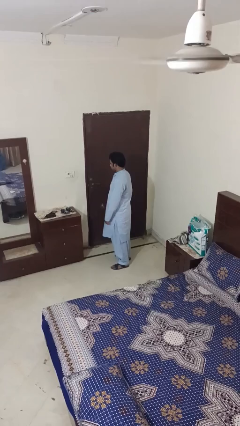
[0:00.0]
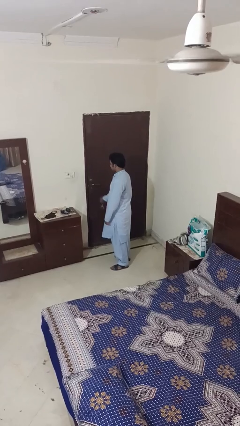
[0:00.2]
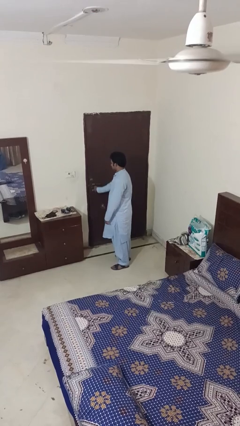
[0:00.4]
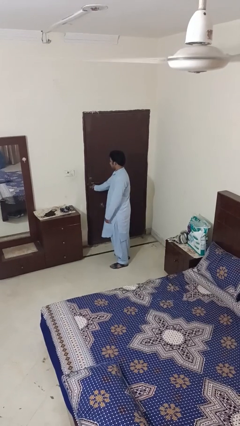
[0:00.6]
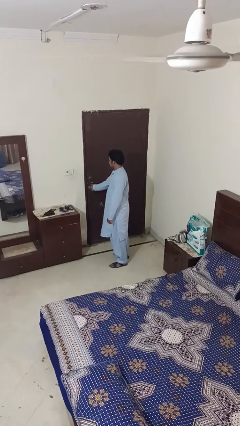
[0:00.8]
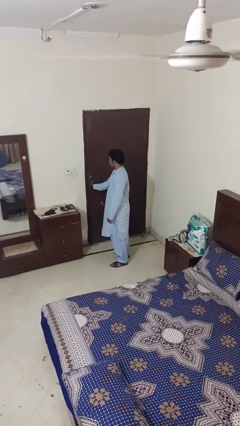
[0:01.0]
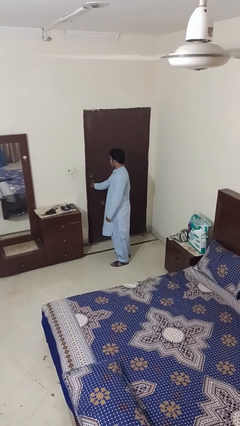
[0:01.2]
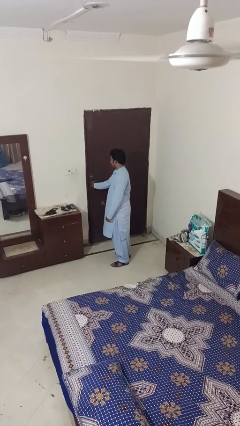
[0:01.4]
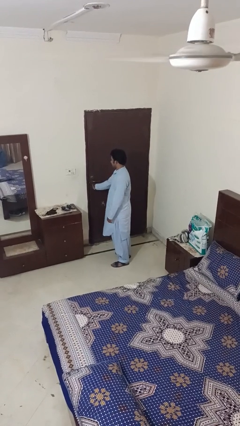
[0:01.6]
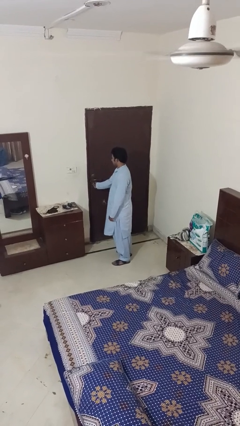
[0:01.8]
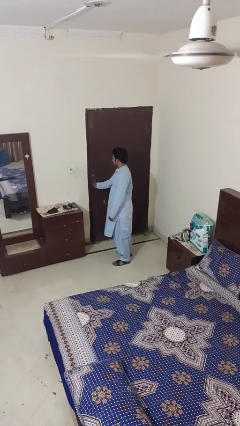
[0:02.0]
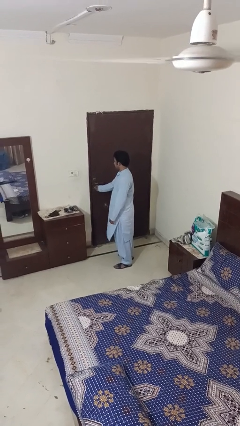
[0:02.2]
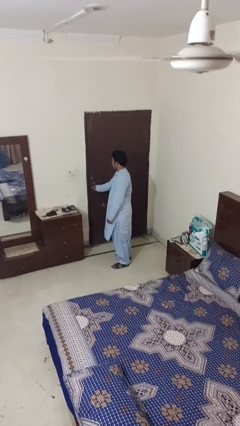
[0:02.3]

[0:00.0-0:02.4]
person unlocks door with keys

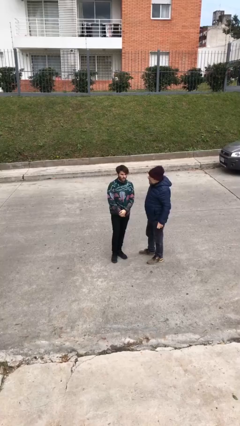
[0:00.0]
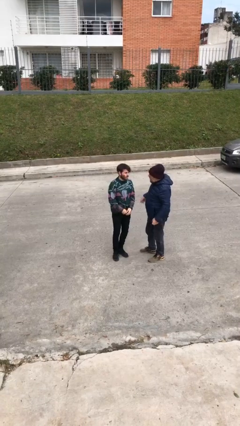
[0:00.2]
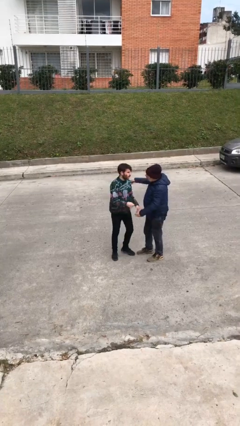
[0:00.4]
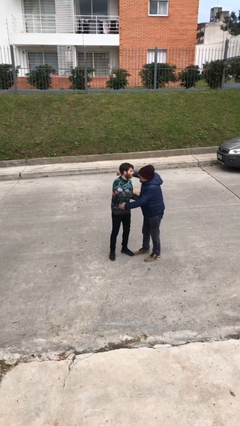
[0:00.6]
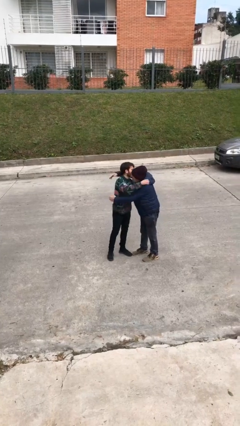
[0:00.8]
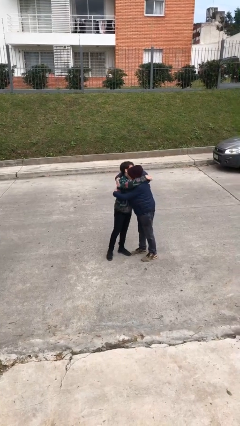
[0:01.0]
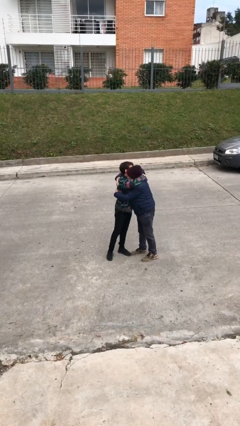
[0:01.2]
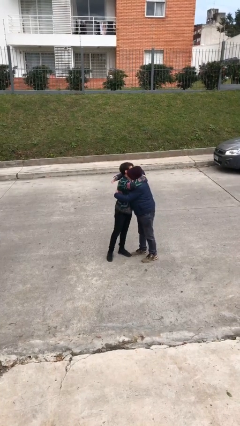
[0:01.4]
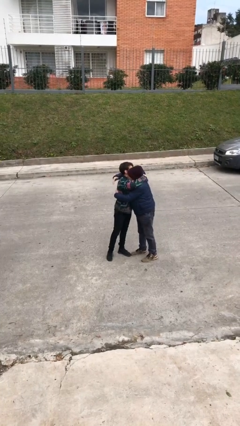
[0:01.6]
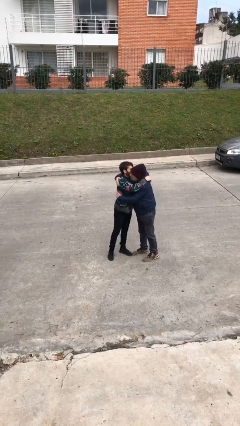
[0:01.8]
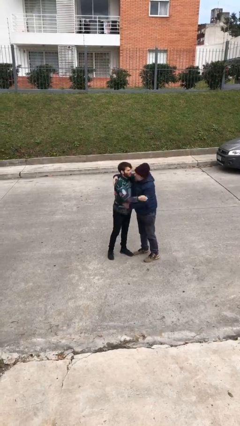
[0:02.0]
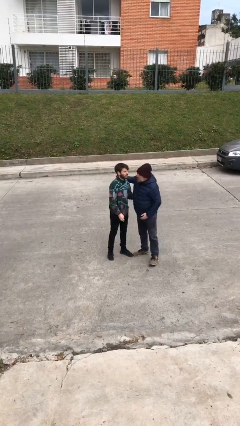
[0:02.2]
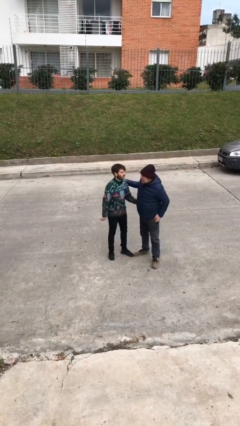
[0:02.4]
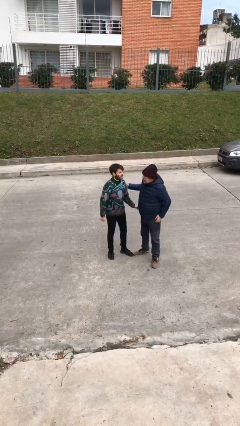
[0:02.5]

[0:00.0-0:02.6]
person embraces person

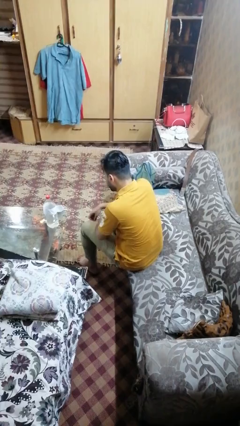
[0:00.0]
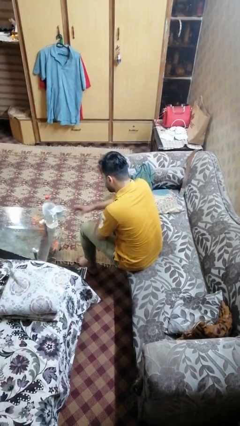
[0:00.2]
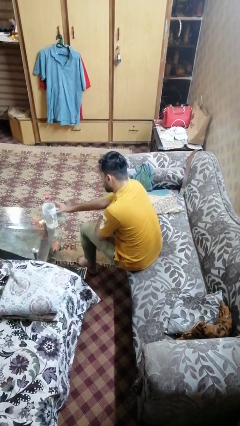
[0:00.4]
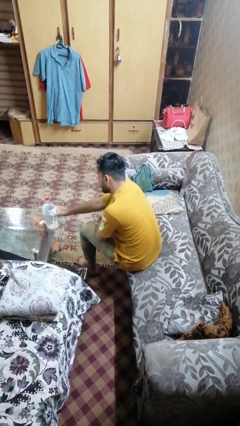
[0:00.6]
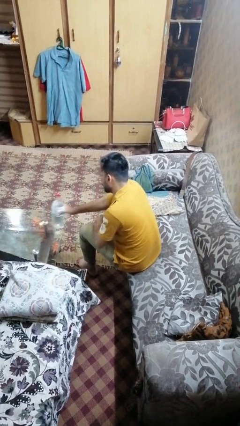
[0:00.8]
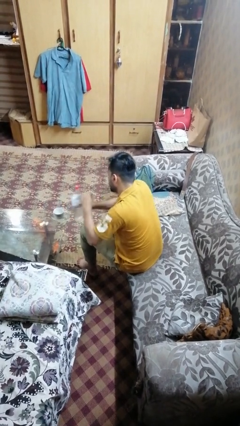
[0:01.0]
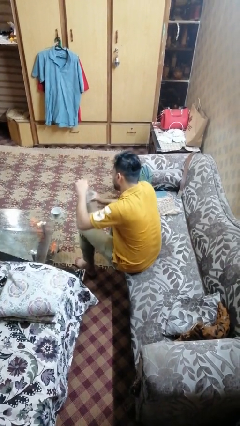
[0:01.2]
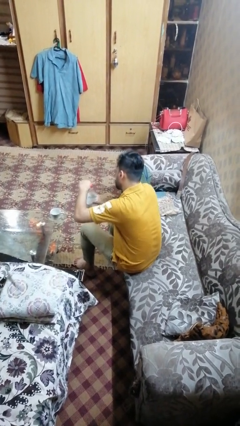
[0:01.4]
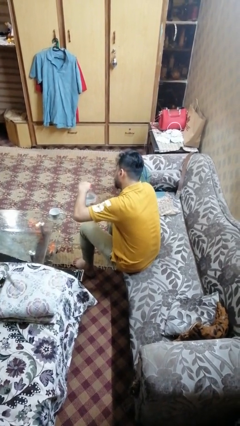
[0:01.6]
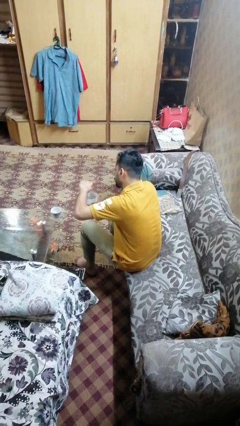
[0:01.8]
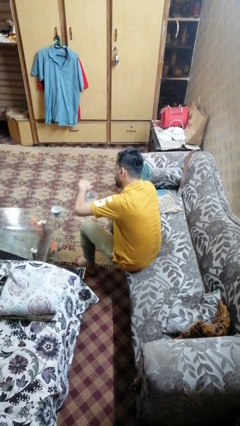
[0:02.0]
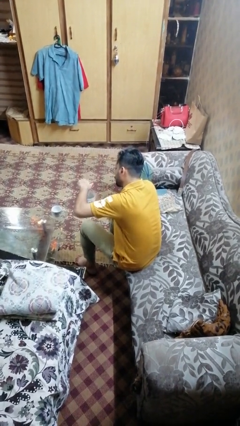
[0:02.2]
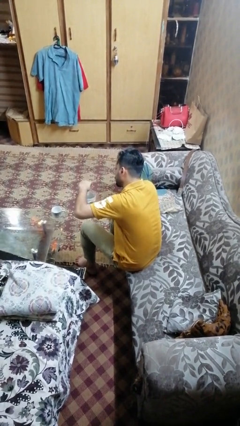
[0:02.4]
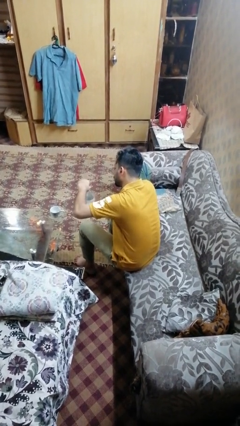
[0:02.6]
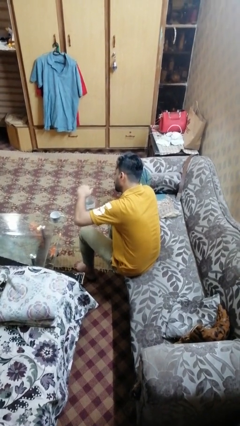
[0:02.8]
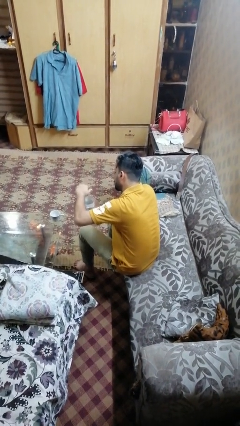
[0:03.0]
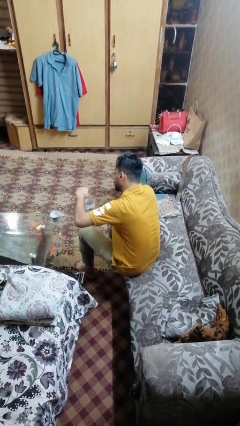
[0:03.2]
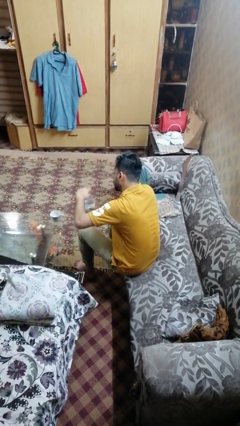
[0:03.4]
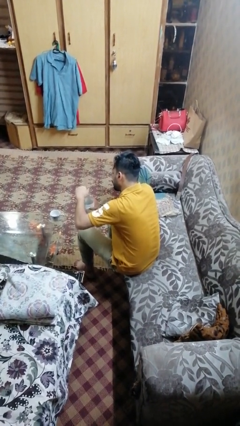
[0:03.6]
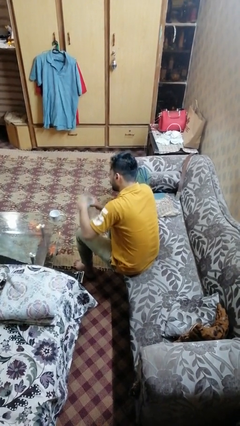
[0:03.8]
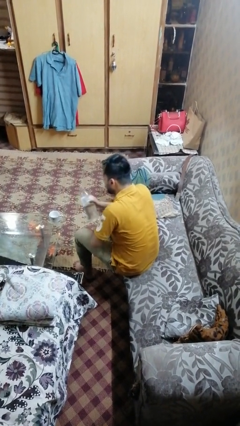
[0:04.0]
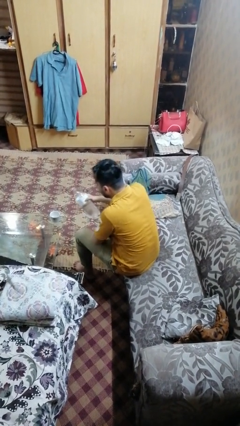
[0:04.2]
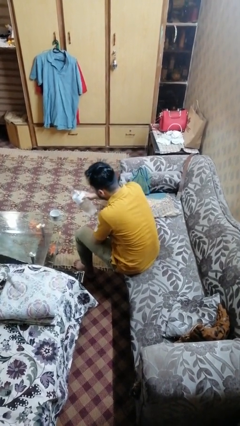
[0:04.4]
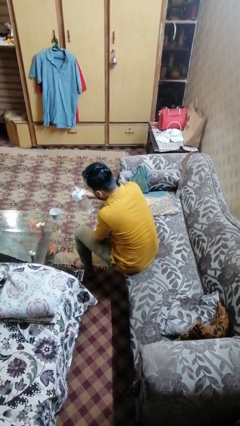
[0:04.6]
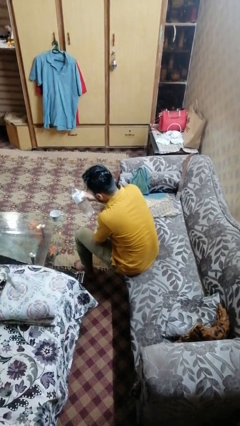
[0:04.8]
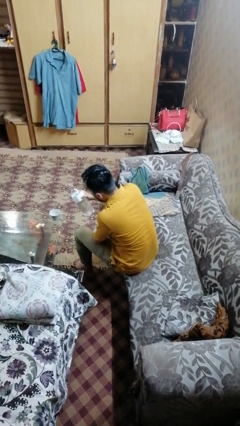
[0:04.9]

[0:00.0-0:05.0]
person unscrews lid from bottle

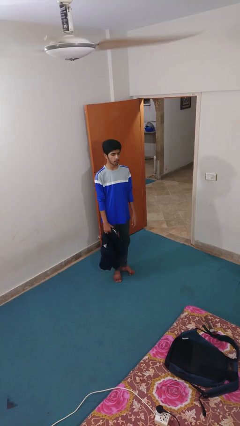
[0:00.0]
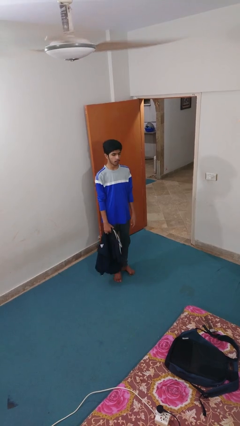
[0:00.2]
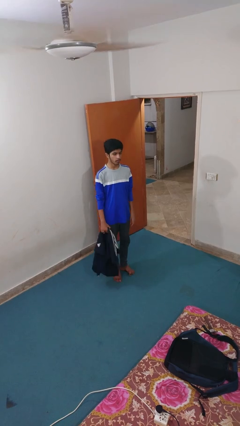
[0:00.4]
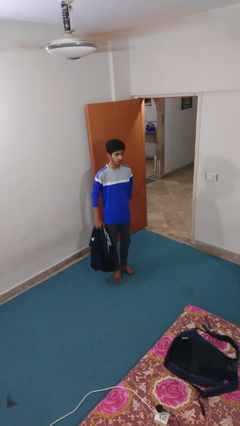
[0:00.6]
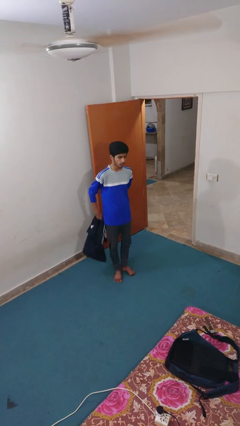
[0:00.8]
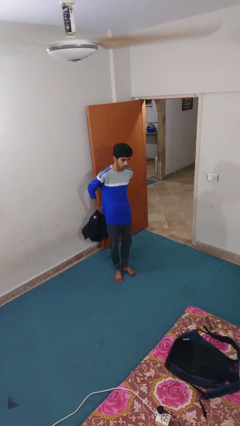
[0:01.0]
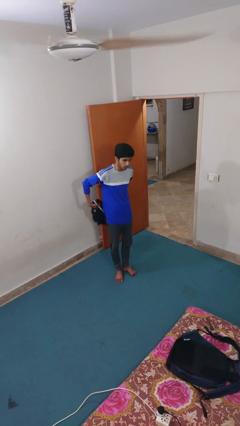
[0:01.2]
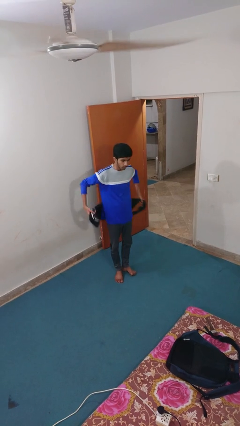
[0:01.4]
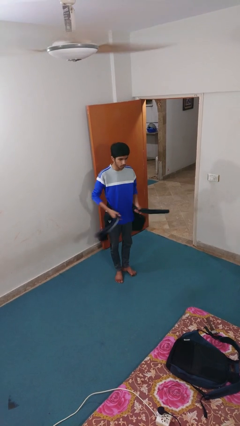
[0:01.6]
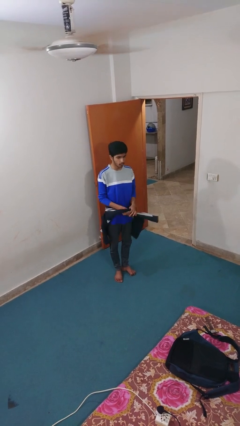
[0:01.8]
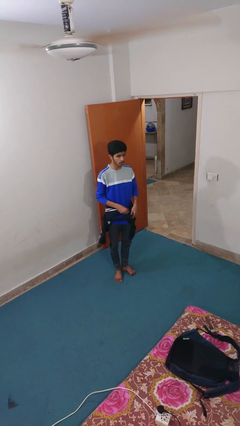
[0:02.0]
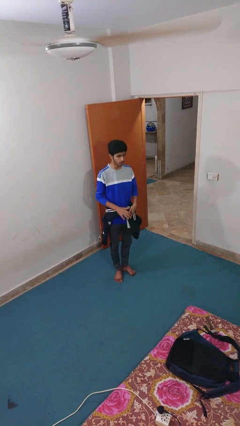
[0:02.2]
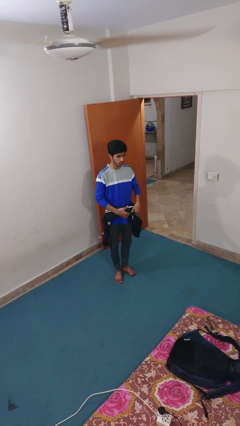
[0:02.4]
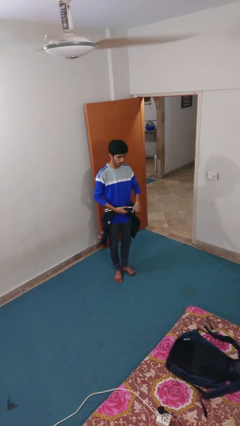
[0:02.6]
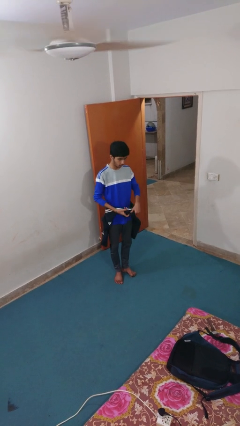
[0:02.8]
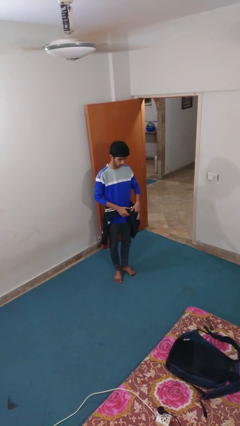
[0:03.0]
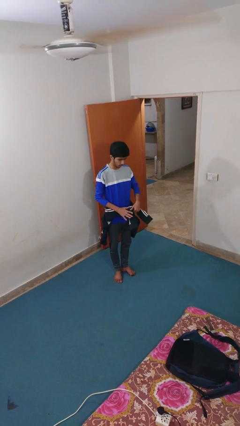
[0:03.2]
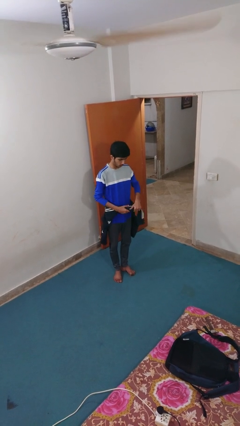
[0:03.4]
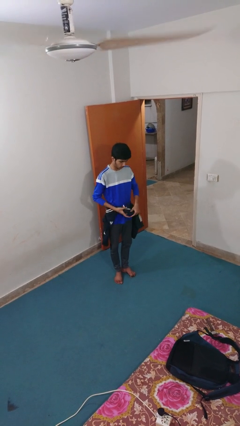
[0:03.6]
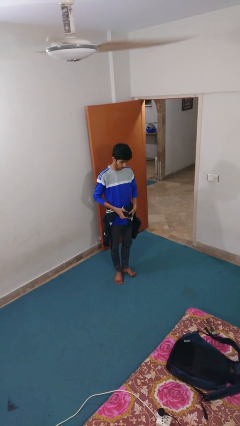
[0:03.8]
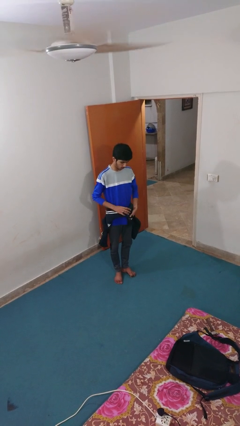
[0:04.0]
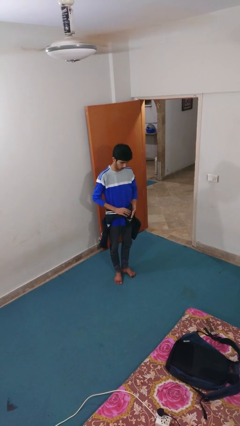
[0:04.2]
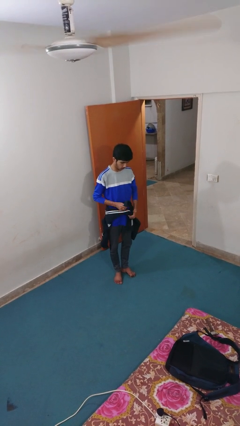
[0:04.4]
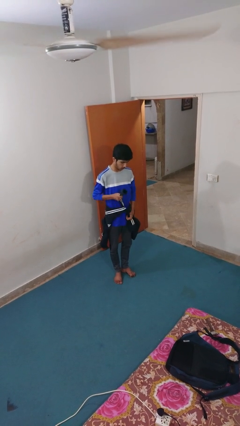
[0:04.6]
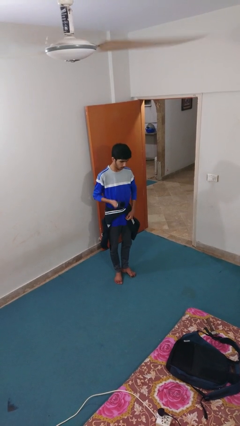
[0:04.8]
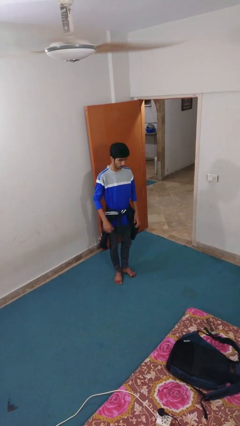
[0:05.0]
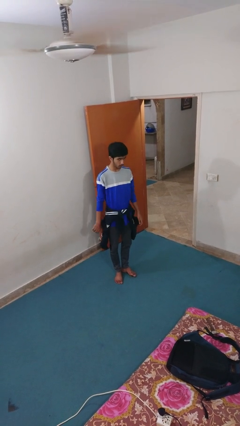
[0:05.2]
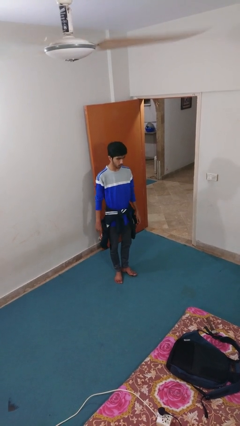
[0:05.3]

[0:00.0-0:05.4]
person ties jacket around waist

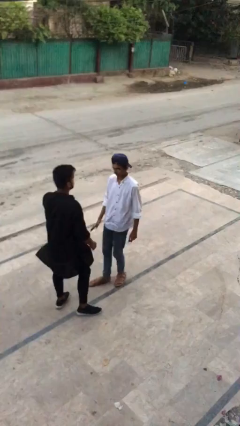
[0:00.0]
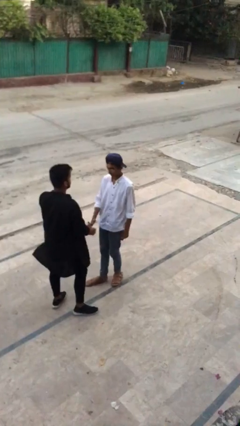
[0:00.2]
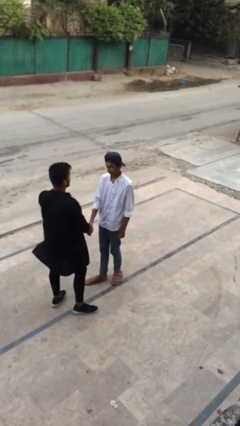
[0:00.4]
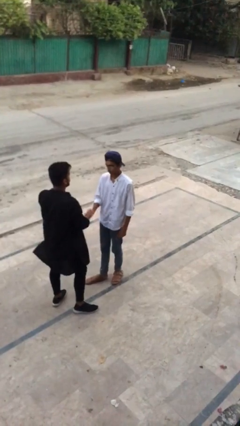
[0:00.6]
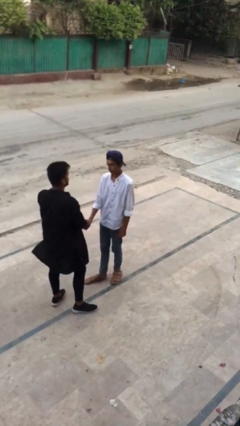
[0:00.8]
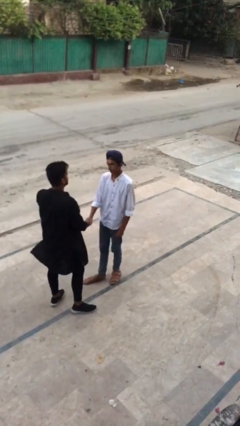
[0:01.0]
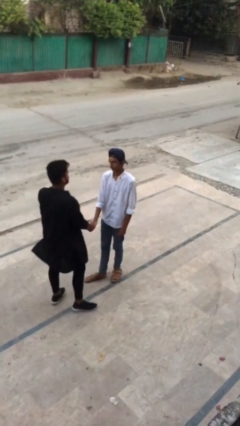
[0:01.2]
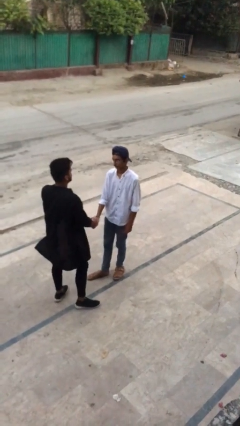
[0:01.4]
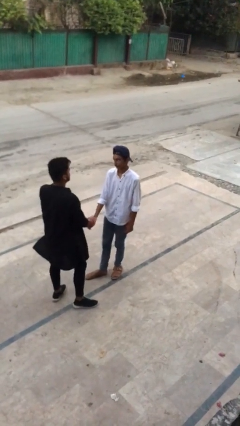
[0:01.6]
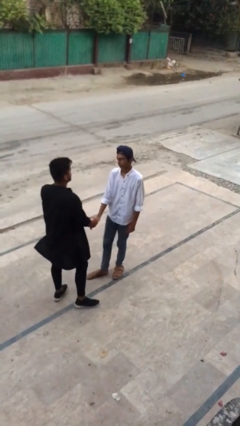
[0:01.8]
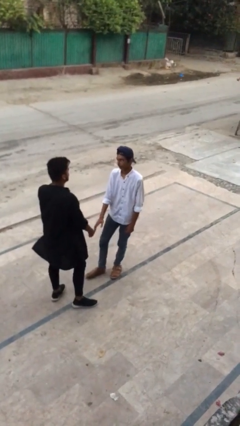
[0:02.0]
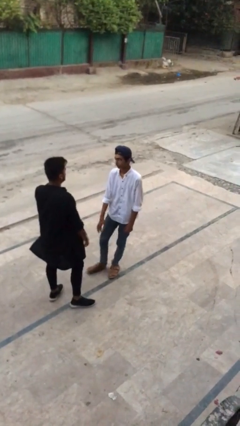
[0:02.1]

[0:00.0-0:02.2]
person shakes hand
